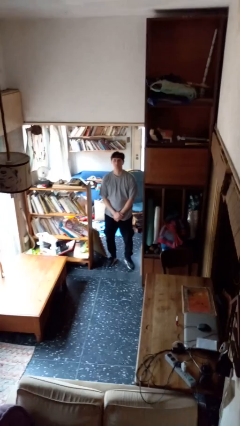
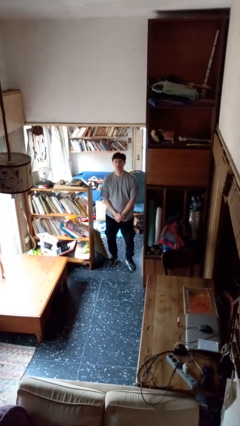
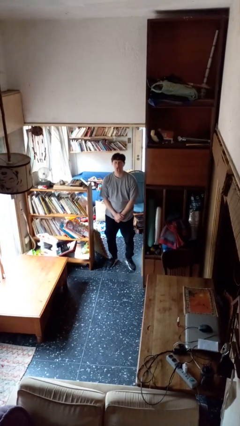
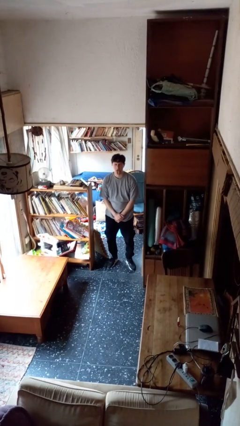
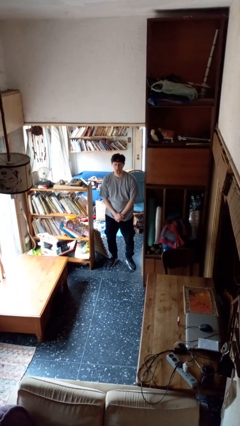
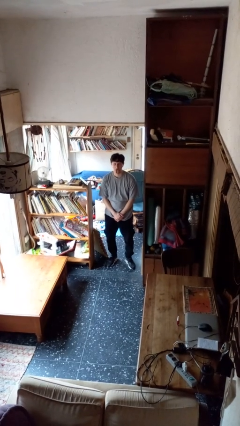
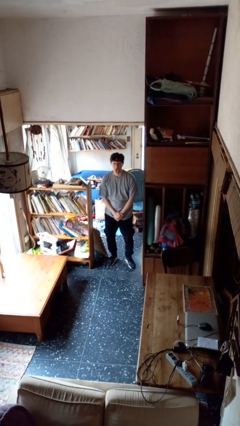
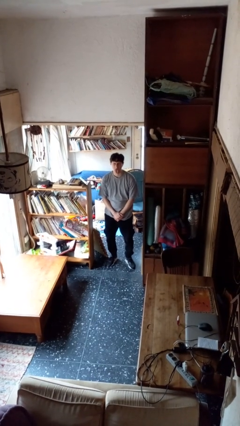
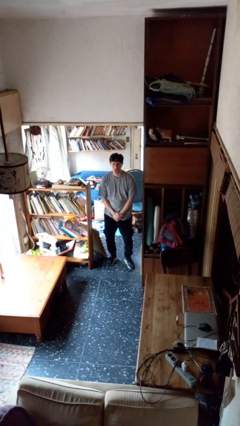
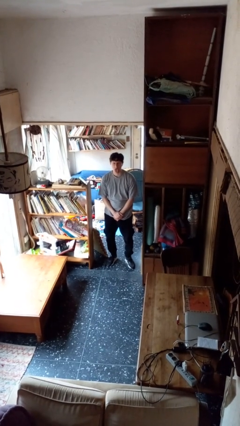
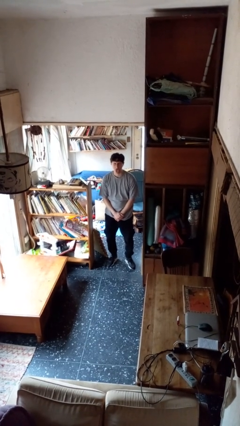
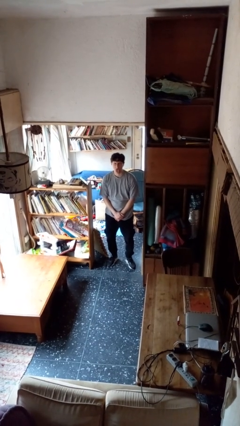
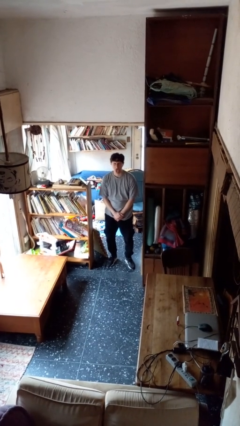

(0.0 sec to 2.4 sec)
person sticks out tongue

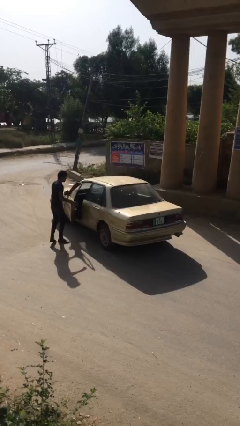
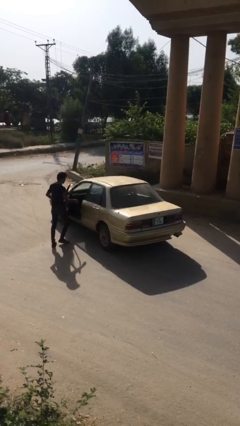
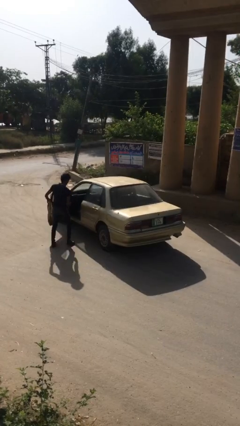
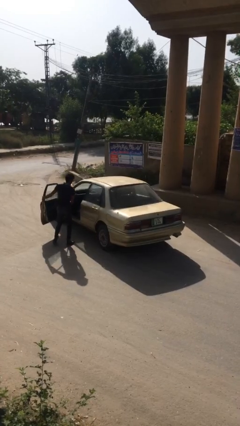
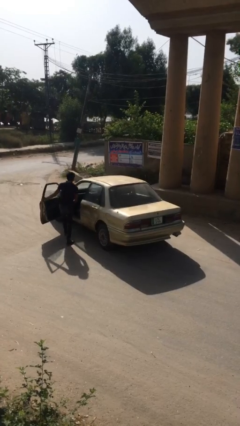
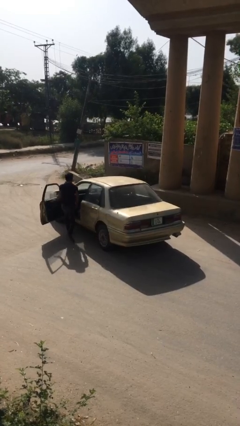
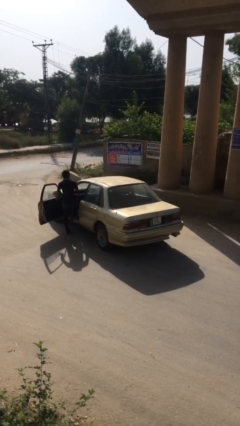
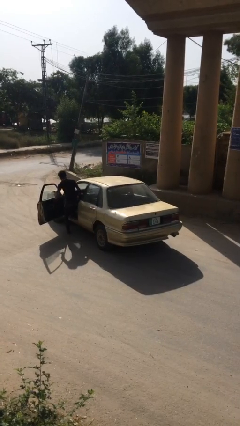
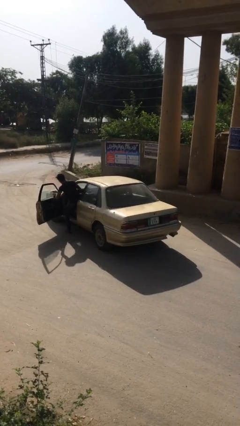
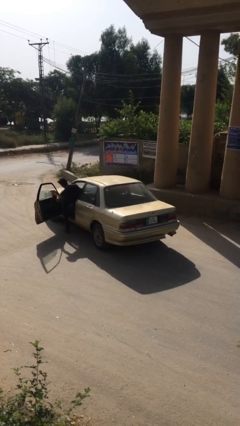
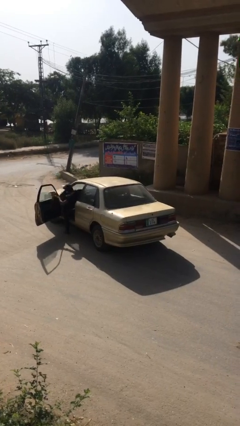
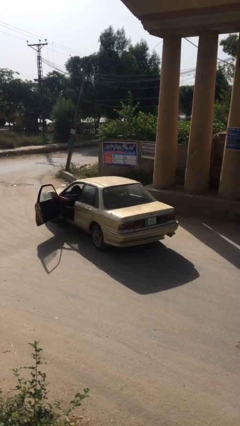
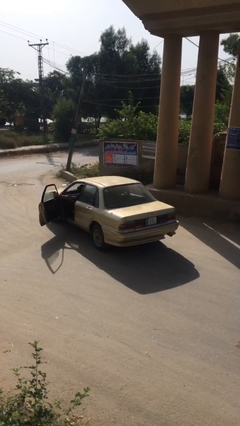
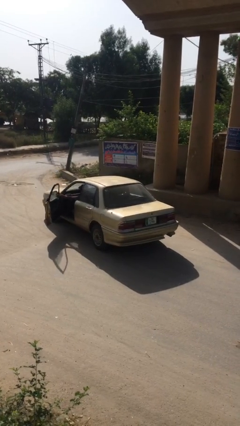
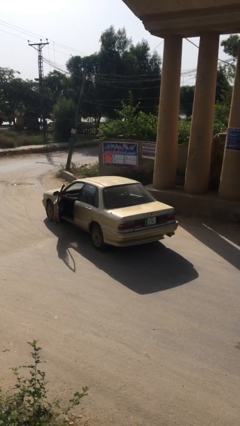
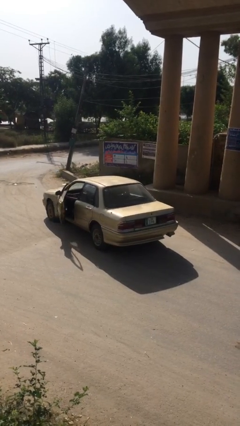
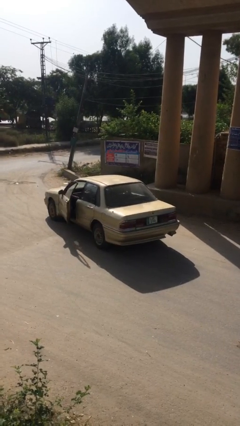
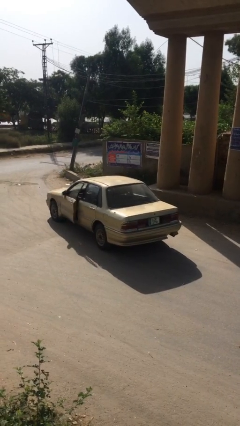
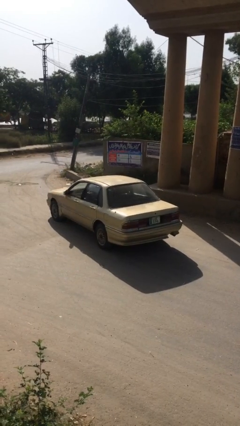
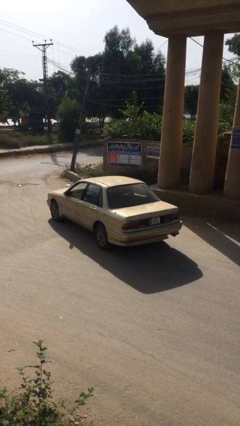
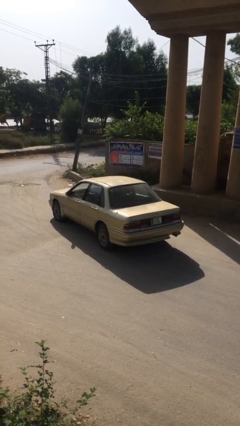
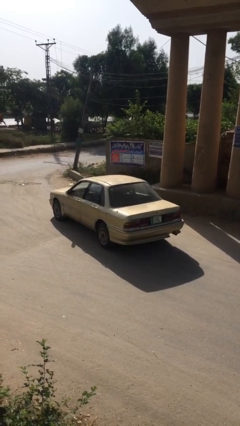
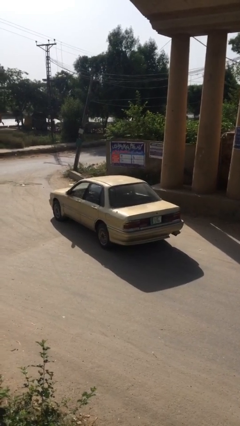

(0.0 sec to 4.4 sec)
car picks up person

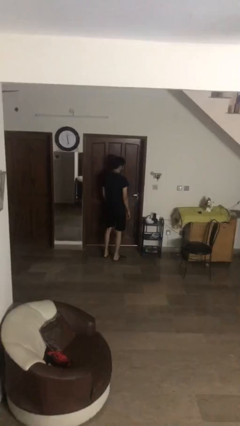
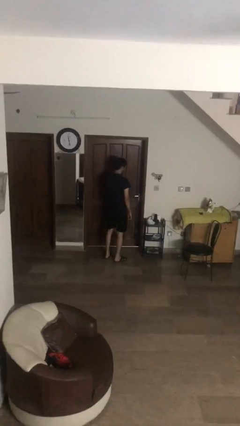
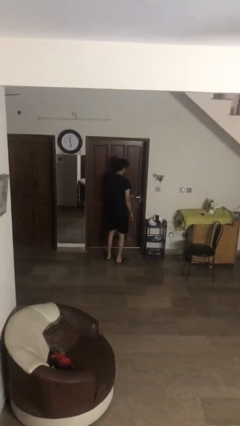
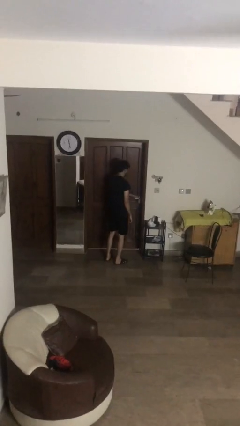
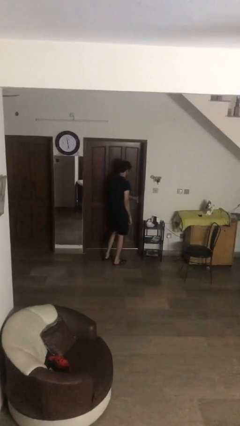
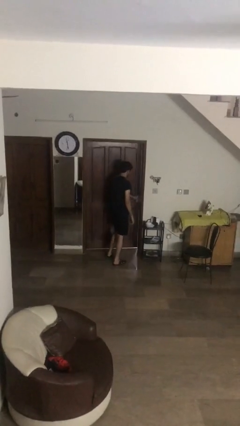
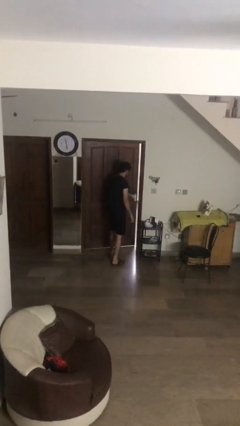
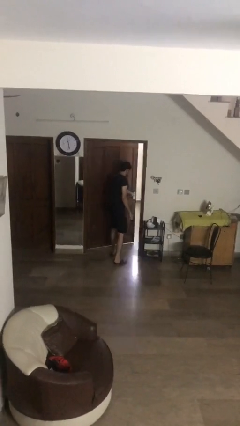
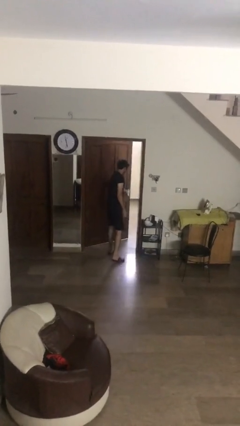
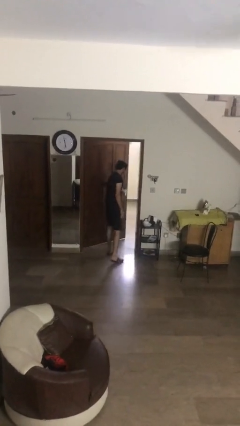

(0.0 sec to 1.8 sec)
person opens facility door

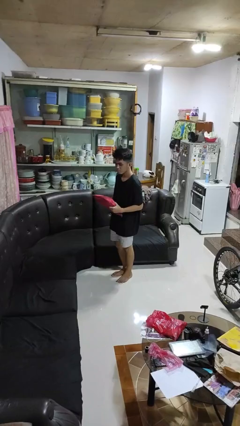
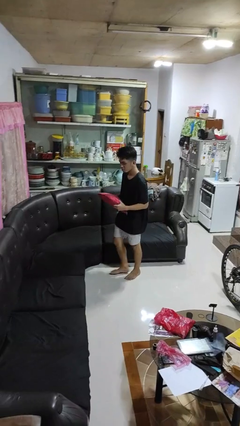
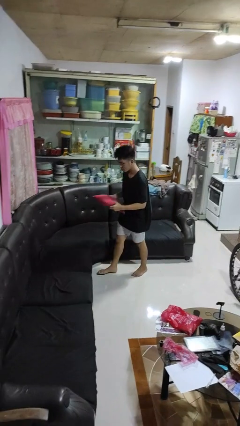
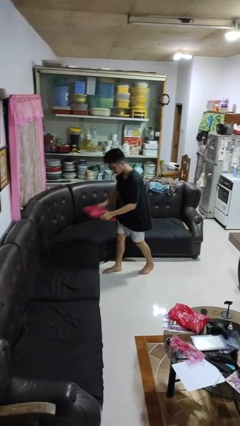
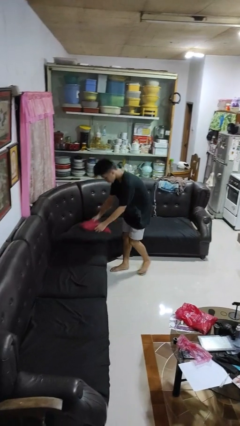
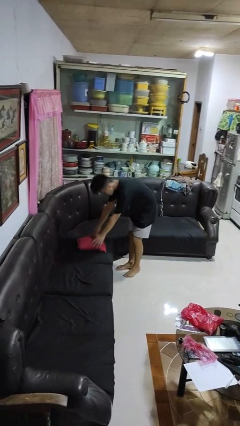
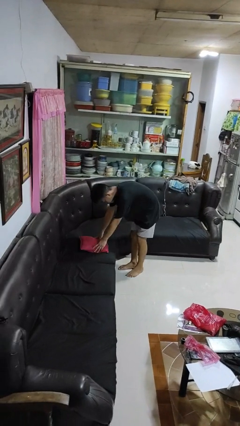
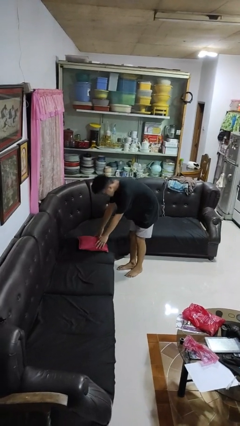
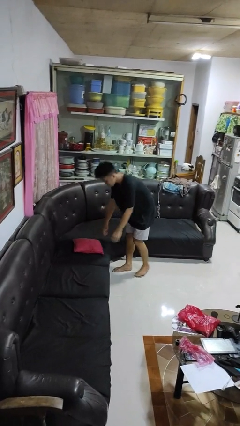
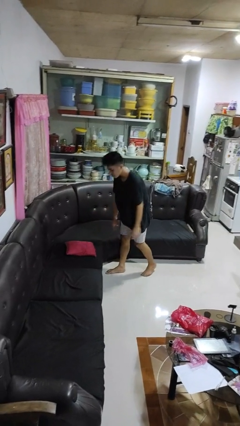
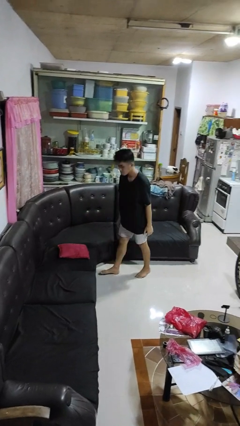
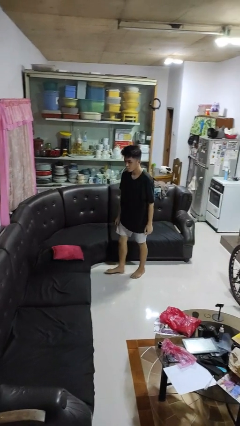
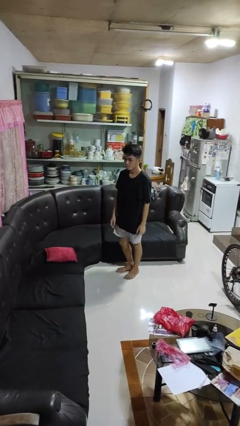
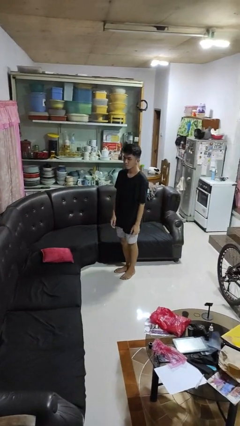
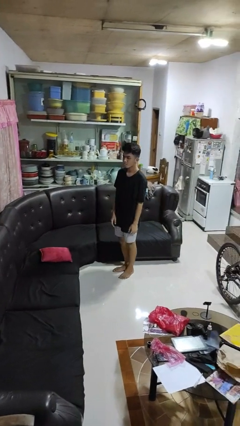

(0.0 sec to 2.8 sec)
person puts down object on couch

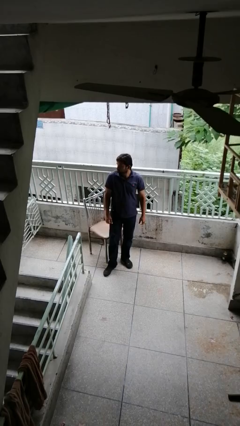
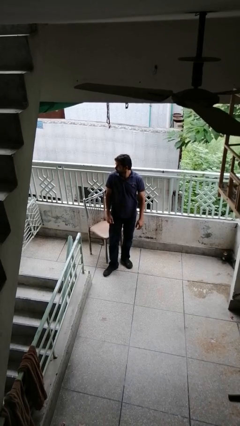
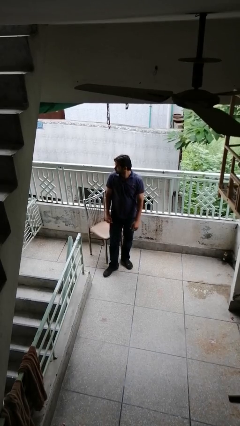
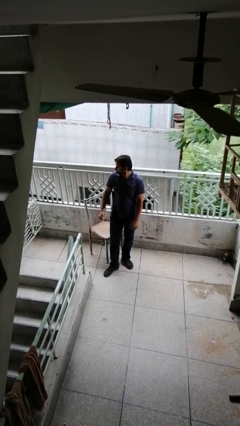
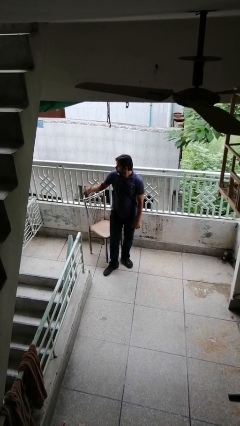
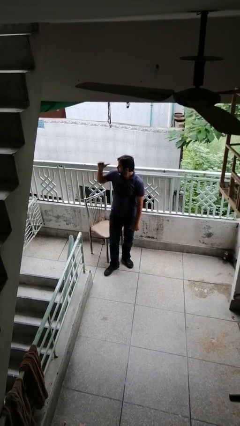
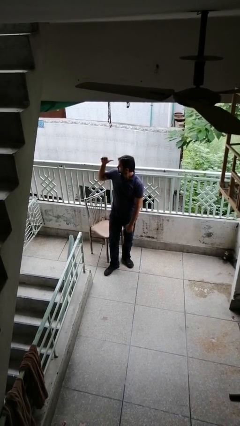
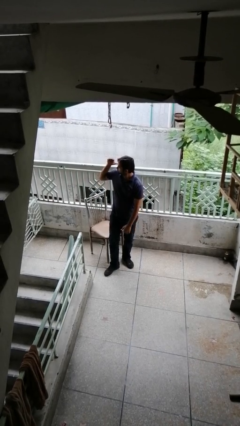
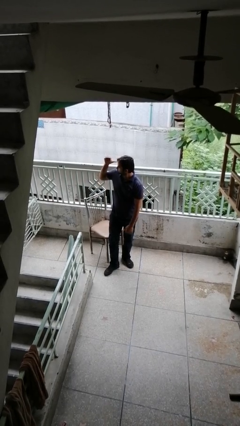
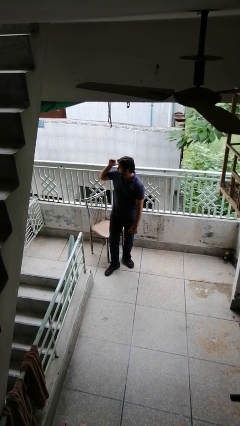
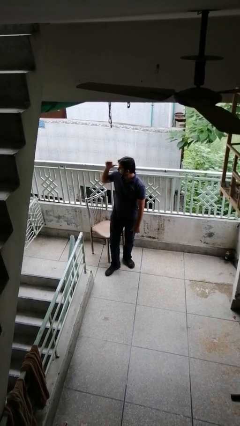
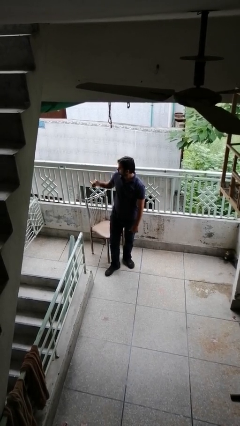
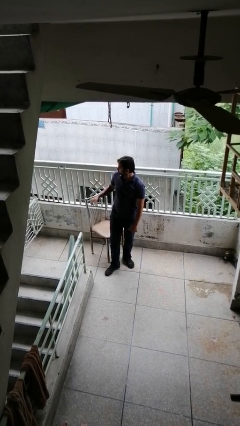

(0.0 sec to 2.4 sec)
person gestures behind me

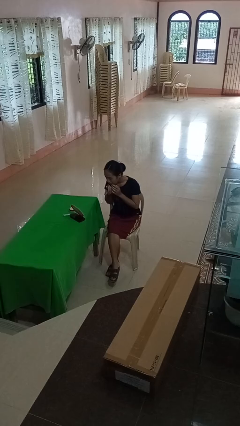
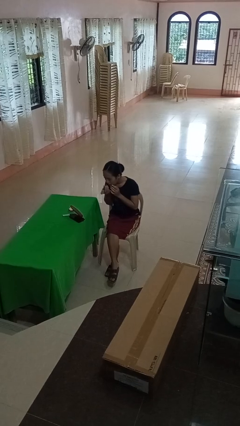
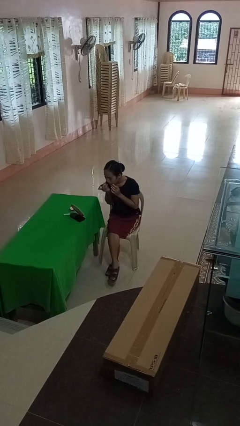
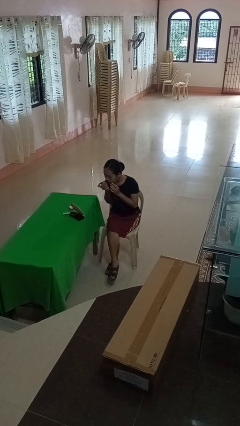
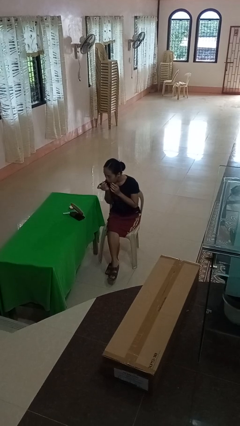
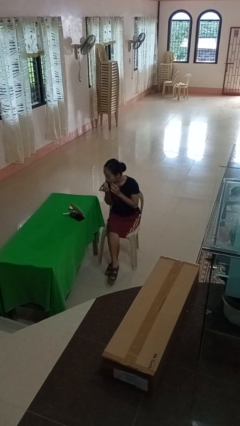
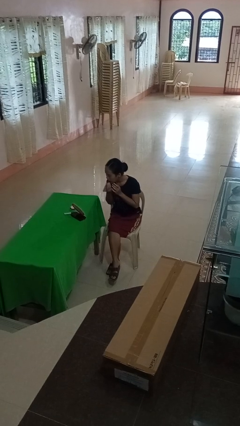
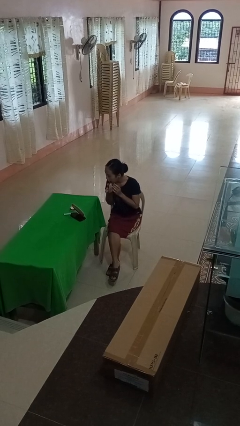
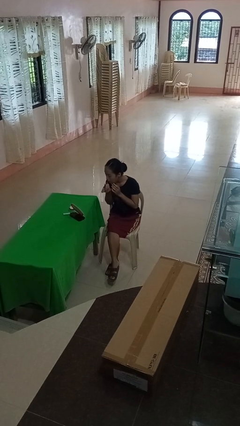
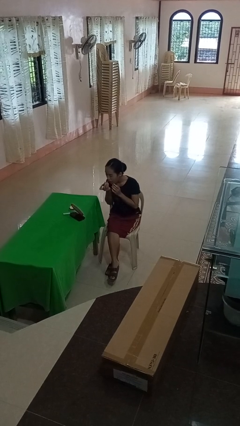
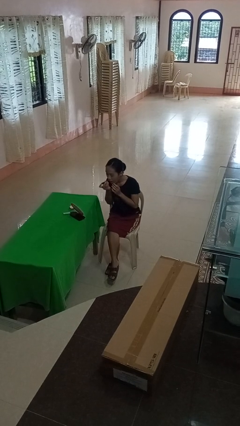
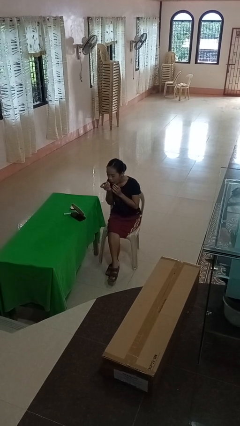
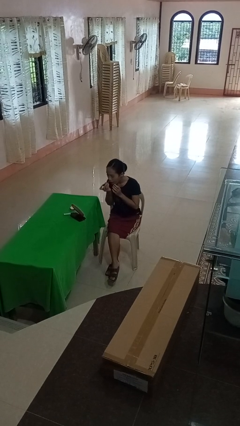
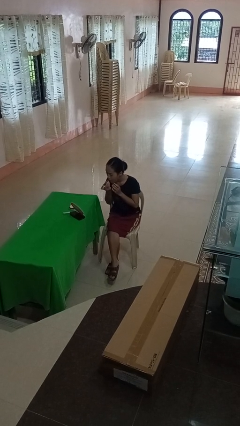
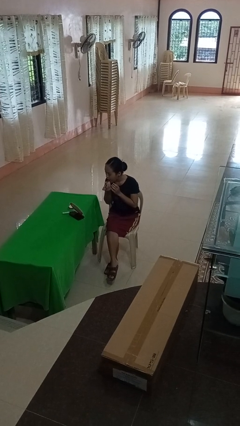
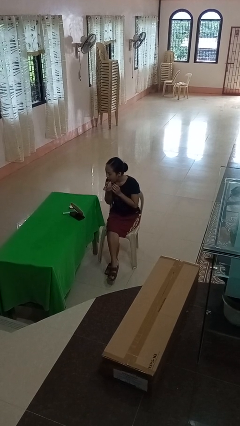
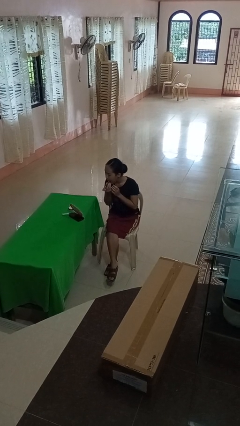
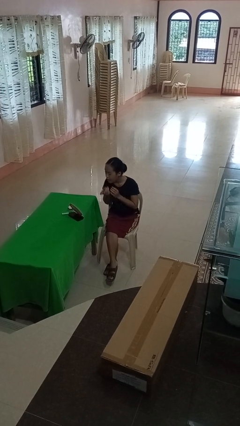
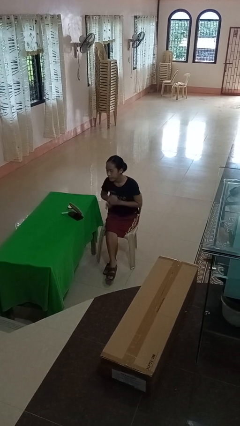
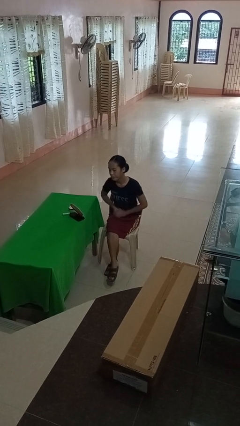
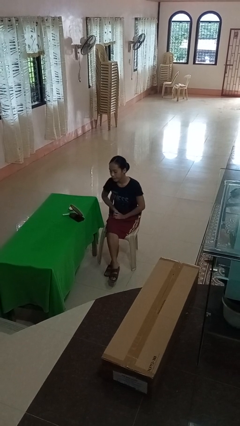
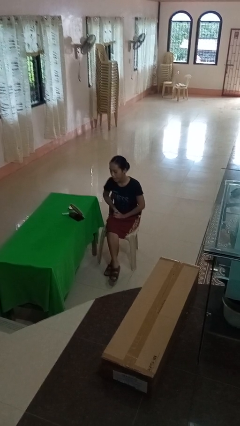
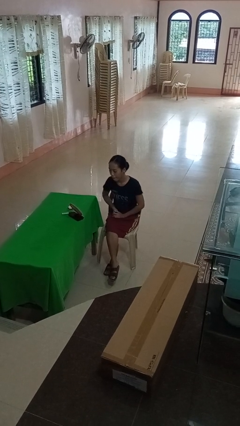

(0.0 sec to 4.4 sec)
person applies lip makeup
